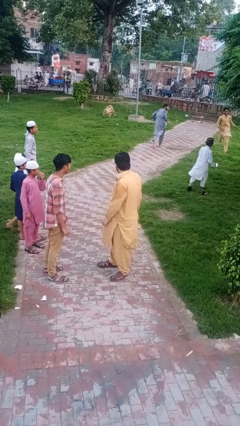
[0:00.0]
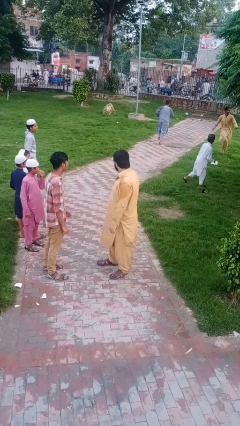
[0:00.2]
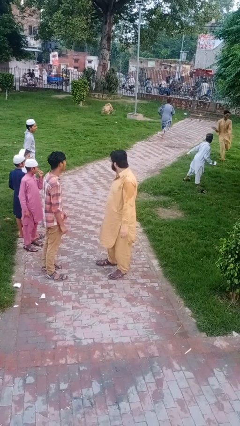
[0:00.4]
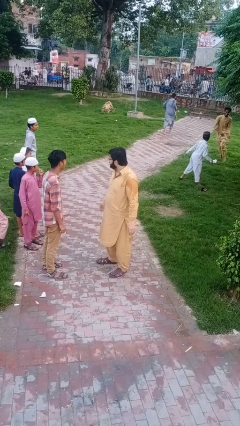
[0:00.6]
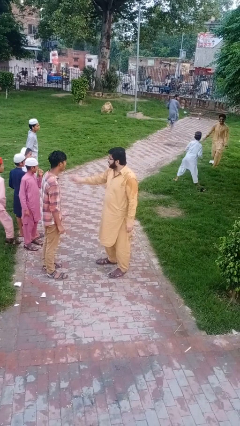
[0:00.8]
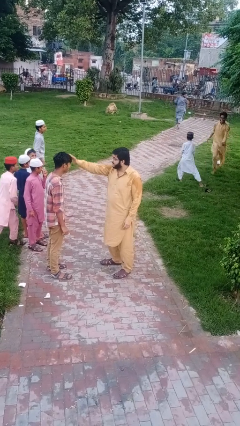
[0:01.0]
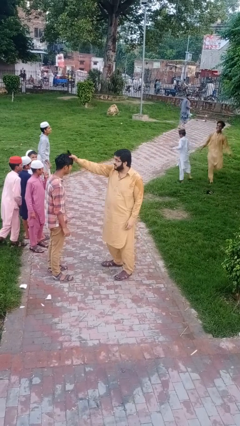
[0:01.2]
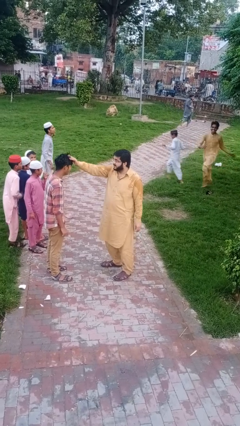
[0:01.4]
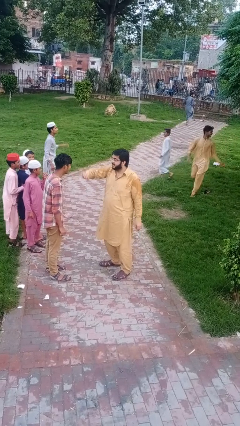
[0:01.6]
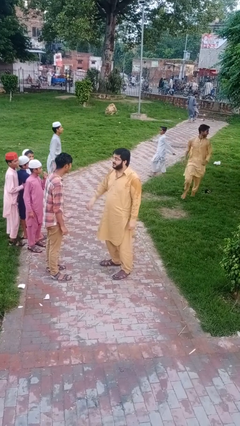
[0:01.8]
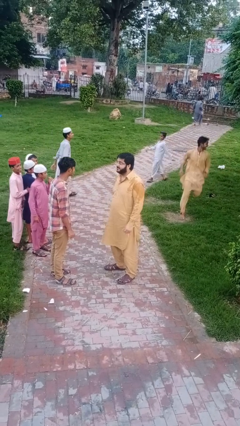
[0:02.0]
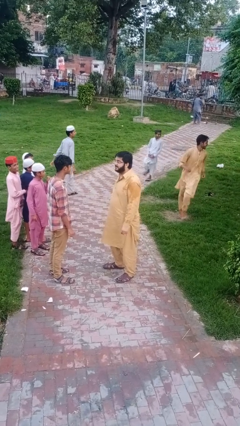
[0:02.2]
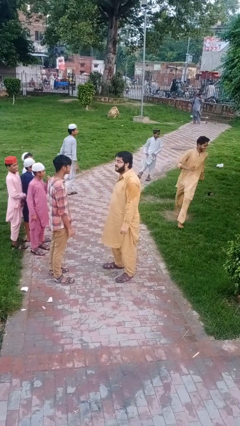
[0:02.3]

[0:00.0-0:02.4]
person grabs person by hair

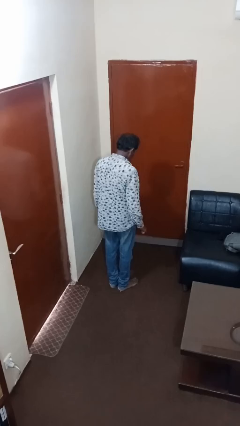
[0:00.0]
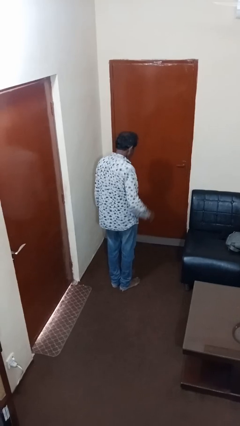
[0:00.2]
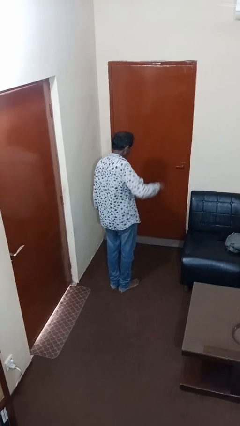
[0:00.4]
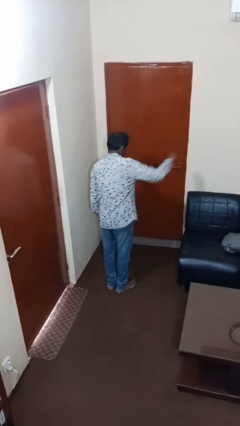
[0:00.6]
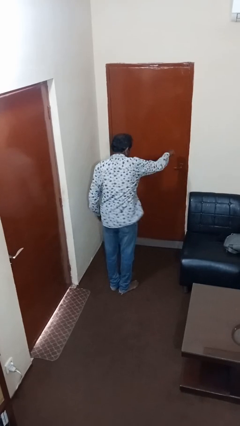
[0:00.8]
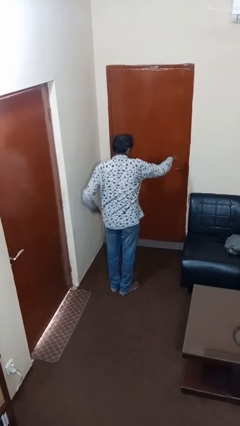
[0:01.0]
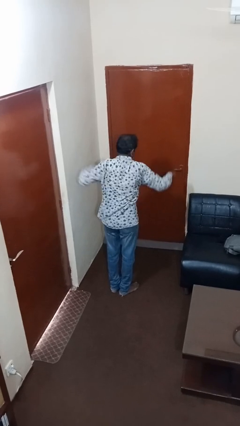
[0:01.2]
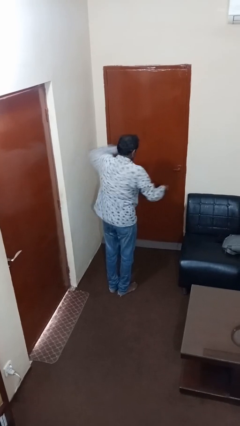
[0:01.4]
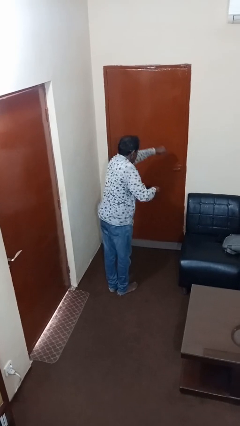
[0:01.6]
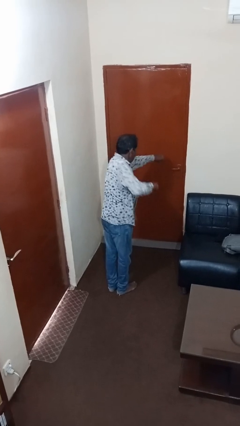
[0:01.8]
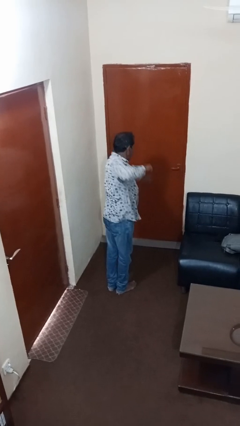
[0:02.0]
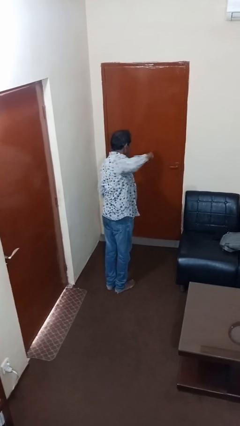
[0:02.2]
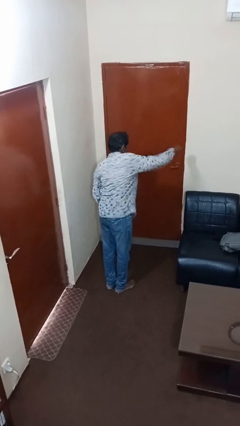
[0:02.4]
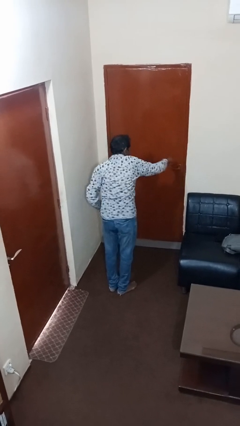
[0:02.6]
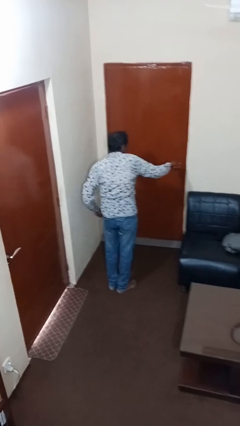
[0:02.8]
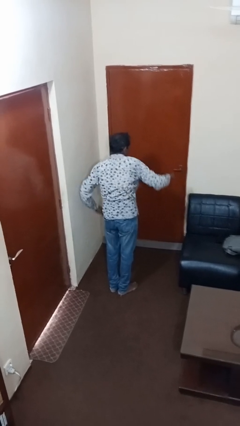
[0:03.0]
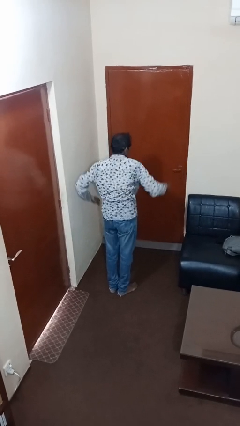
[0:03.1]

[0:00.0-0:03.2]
person punches

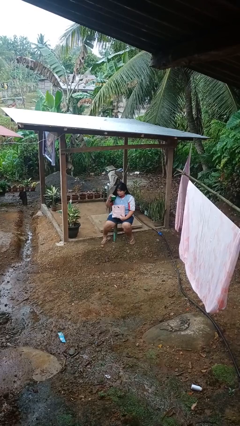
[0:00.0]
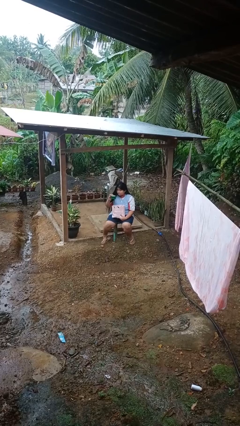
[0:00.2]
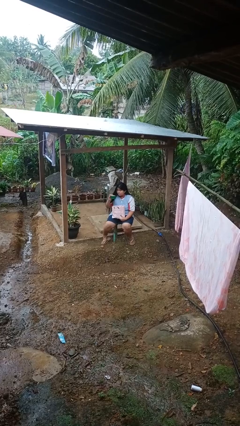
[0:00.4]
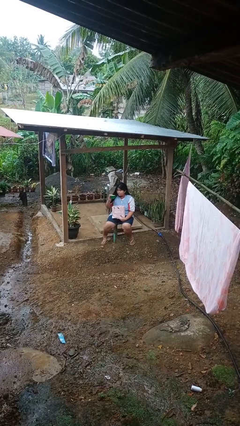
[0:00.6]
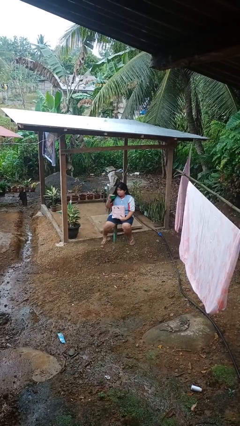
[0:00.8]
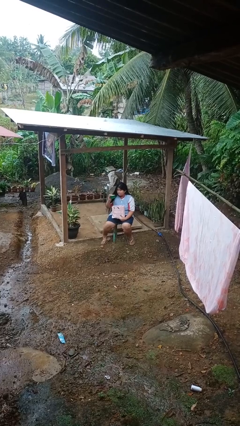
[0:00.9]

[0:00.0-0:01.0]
person takes object from bag

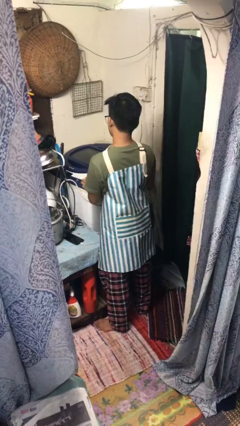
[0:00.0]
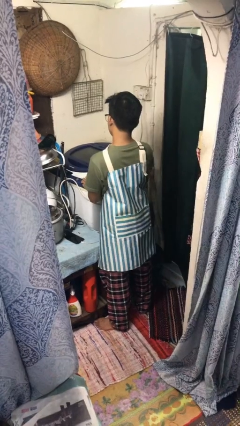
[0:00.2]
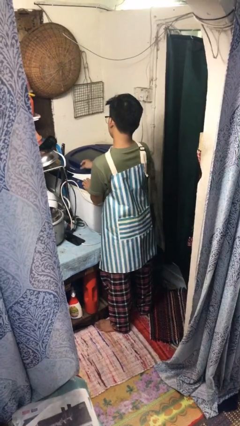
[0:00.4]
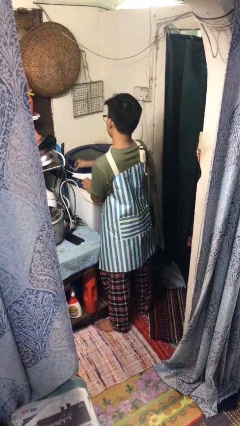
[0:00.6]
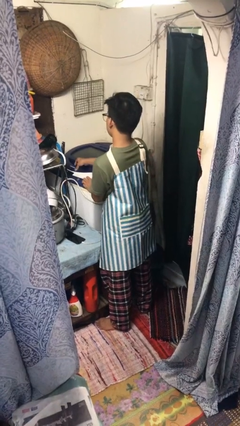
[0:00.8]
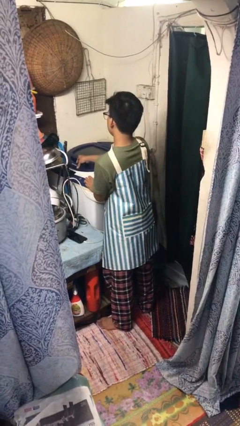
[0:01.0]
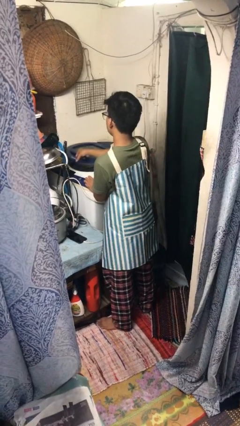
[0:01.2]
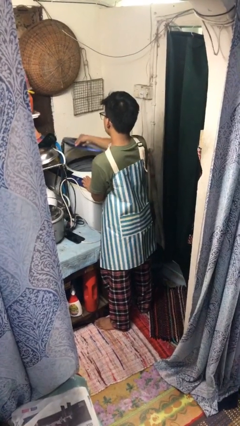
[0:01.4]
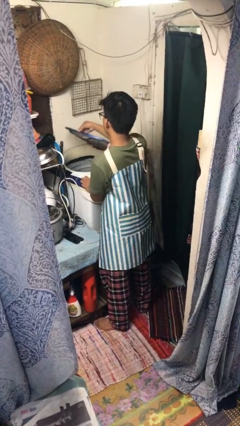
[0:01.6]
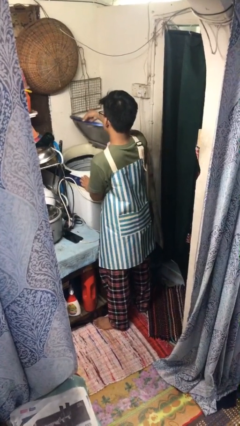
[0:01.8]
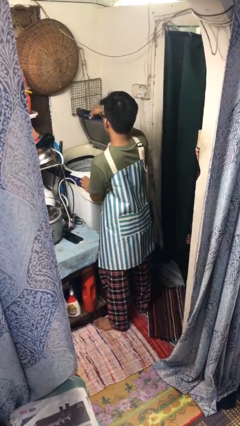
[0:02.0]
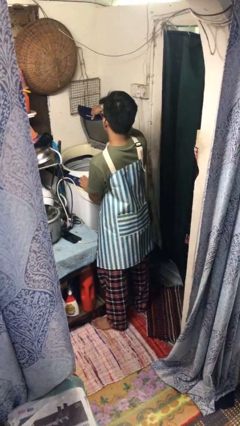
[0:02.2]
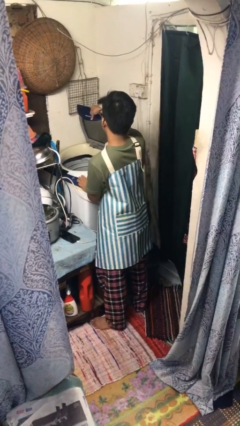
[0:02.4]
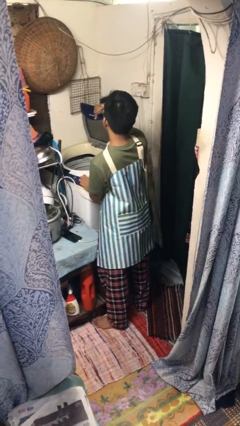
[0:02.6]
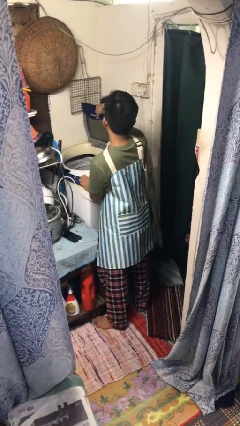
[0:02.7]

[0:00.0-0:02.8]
person opens clothes washer

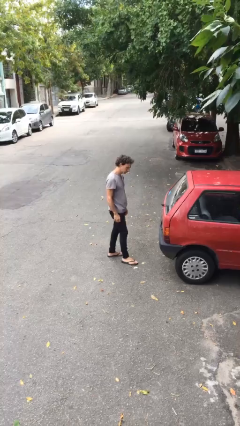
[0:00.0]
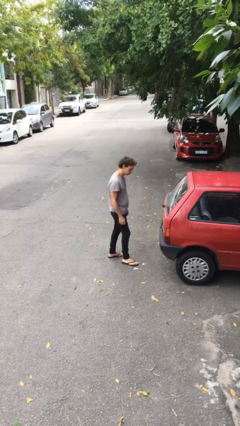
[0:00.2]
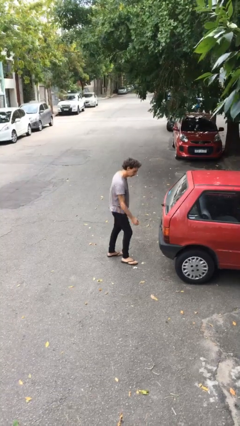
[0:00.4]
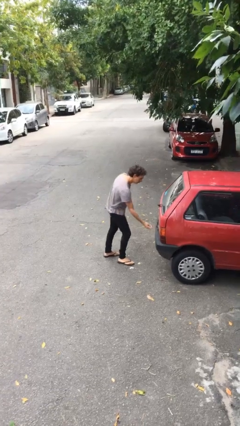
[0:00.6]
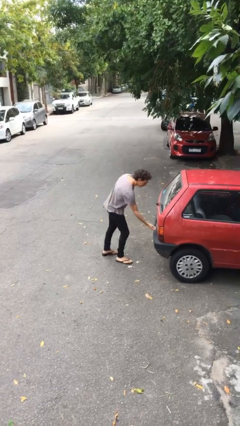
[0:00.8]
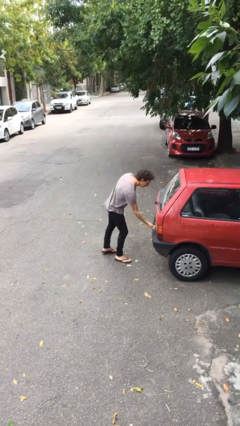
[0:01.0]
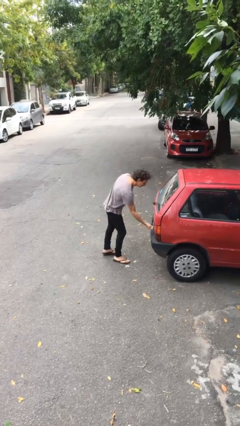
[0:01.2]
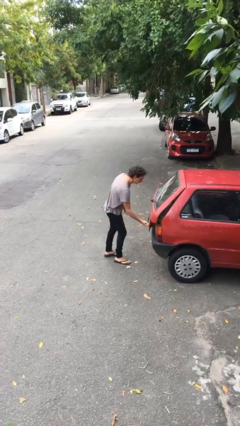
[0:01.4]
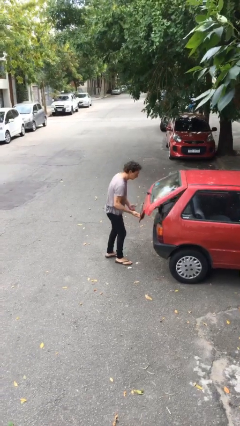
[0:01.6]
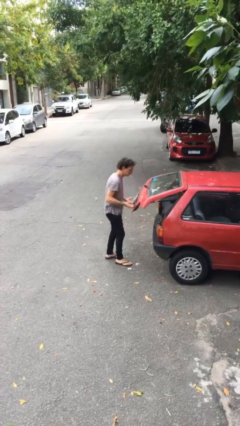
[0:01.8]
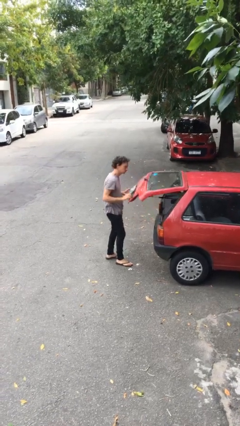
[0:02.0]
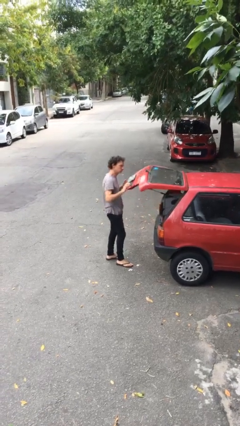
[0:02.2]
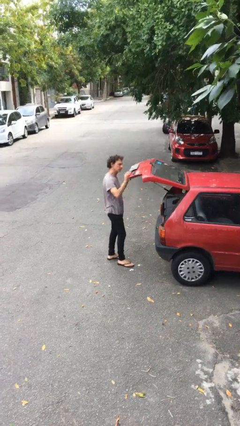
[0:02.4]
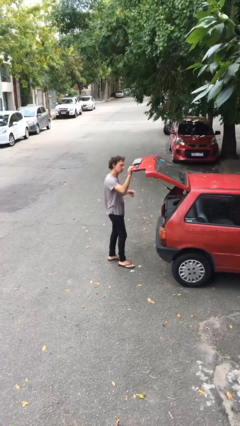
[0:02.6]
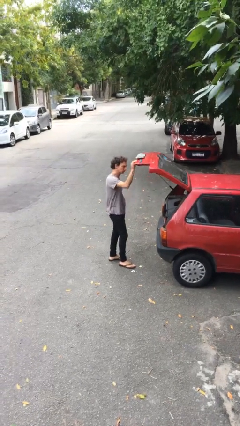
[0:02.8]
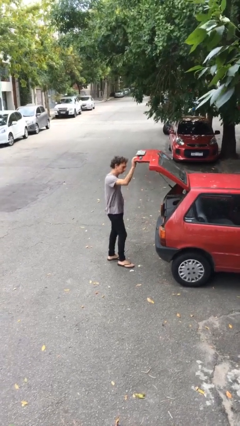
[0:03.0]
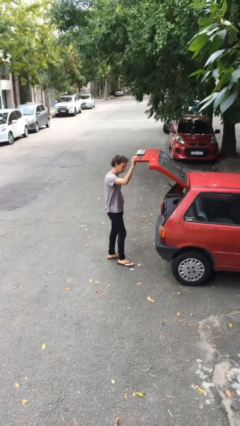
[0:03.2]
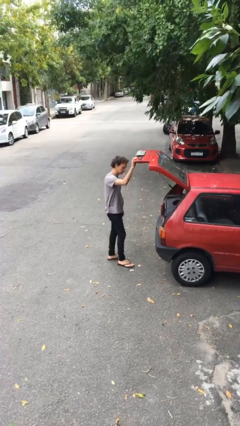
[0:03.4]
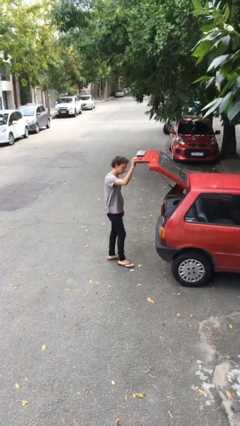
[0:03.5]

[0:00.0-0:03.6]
person opens car trunk

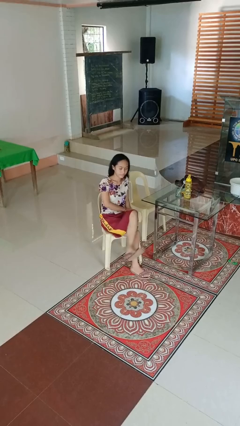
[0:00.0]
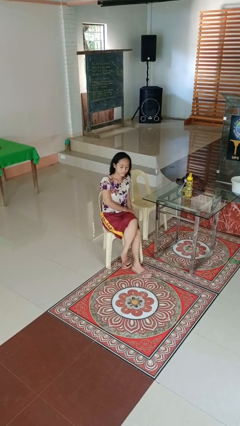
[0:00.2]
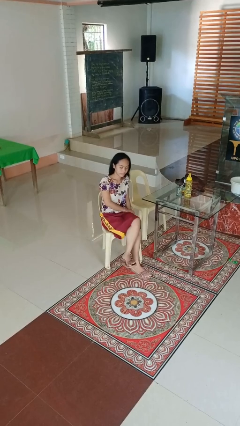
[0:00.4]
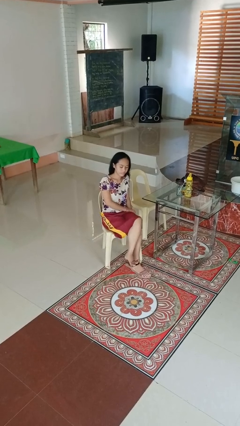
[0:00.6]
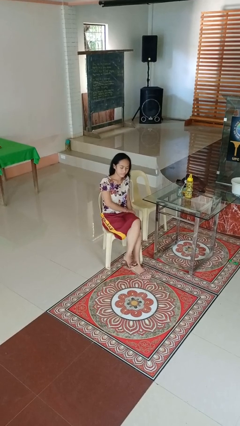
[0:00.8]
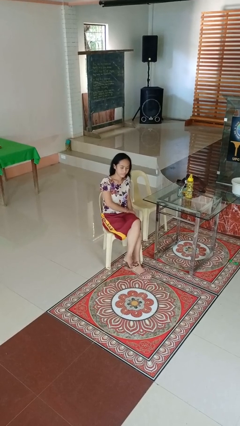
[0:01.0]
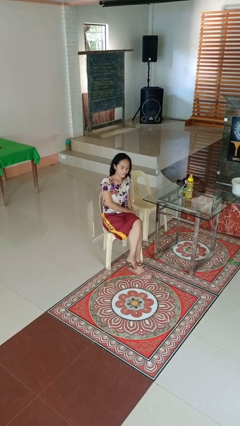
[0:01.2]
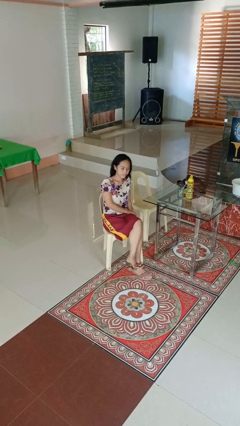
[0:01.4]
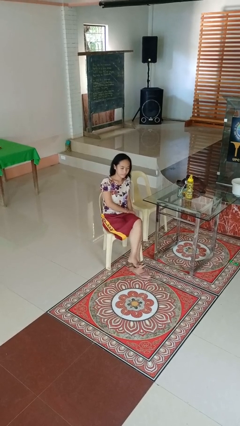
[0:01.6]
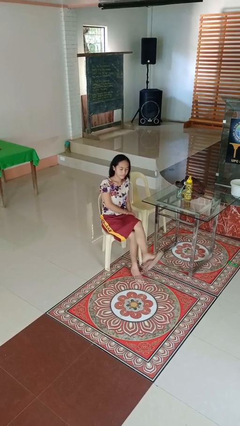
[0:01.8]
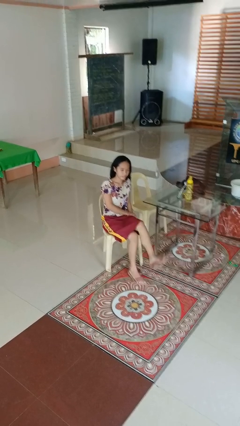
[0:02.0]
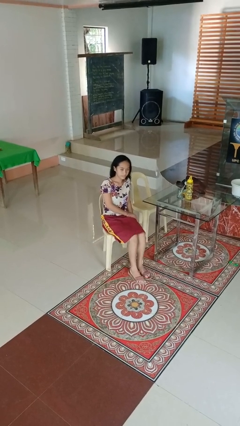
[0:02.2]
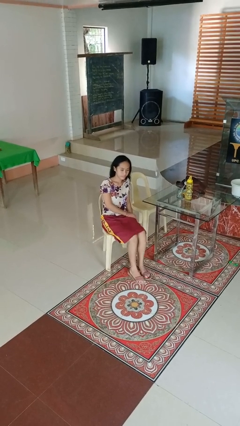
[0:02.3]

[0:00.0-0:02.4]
person crosses legs

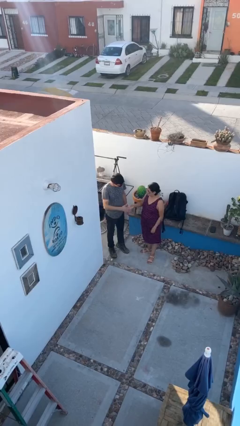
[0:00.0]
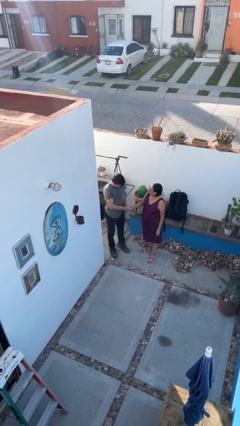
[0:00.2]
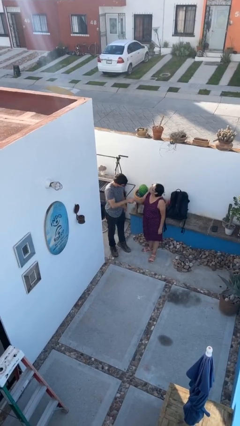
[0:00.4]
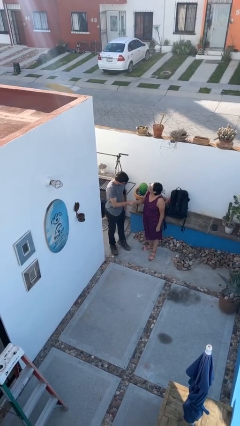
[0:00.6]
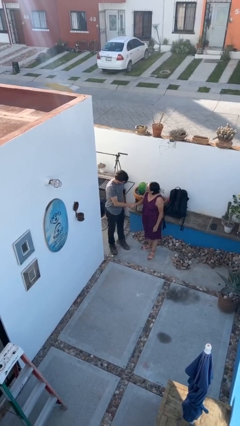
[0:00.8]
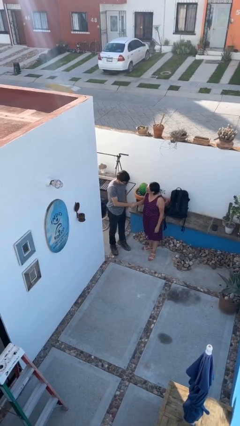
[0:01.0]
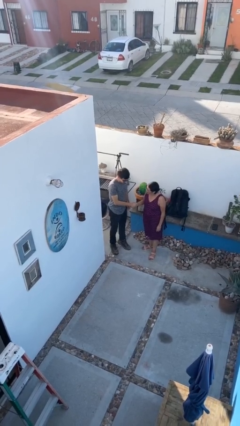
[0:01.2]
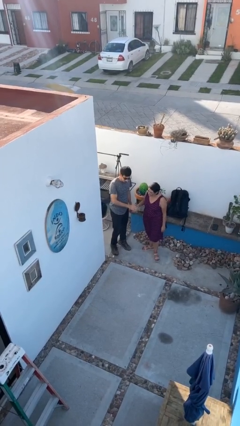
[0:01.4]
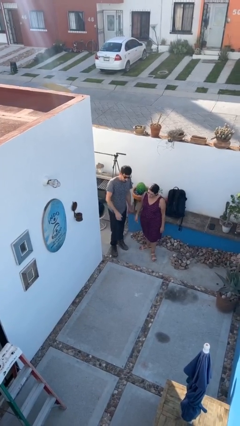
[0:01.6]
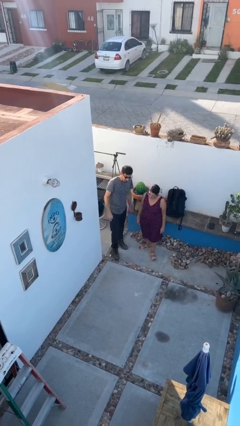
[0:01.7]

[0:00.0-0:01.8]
person shakes hand
